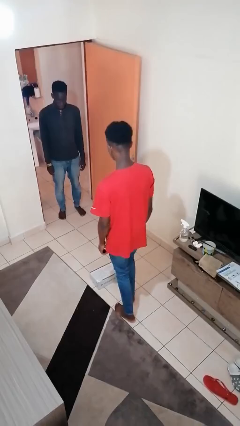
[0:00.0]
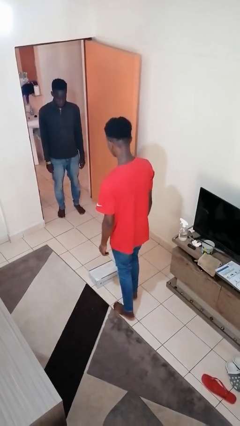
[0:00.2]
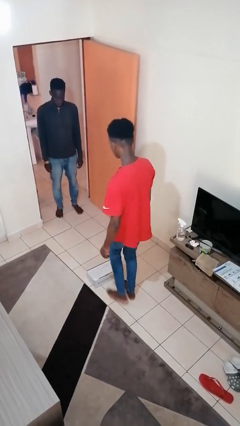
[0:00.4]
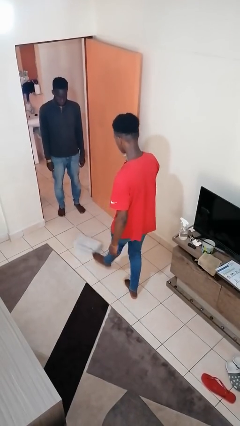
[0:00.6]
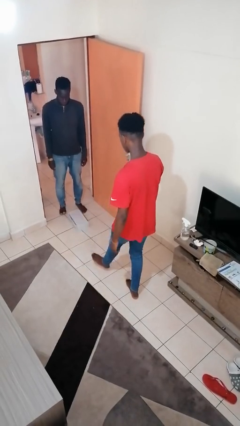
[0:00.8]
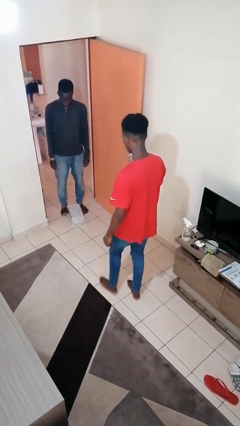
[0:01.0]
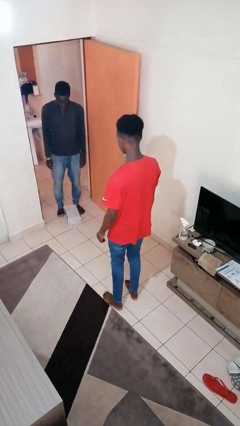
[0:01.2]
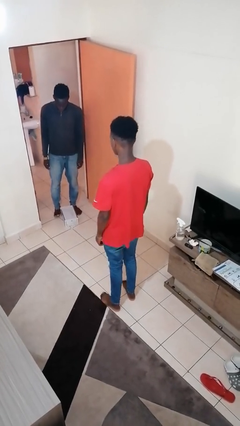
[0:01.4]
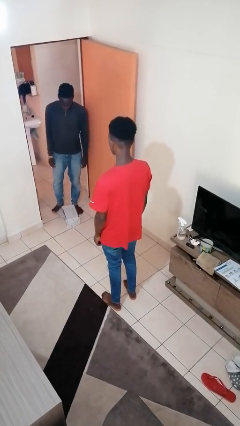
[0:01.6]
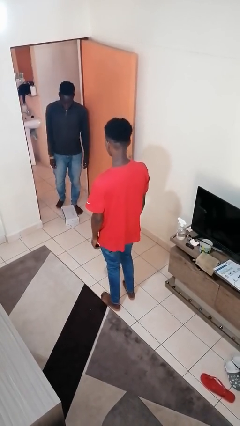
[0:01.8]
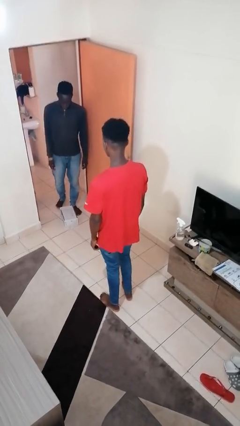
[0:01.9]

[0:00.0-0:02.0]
person kicks object to person

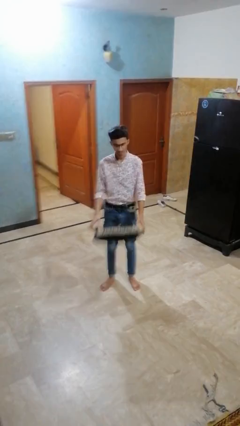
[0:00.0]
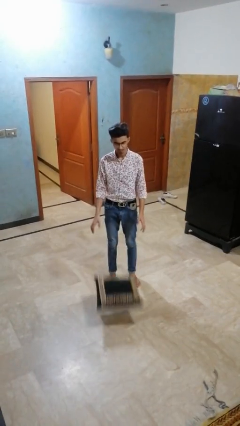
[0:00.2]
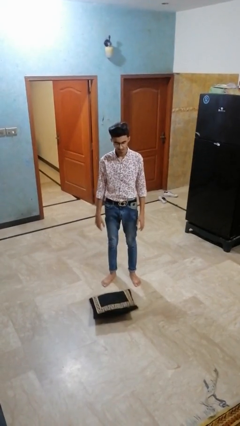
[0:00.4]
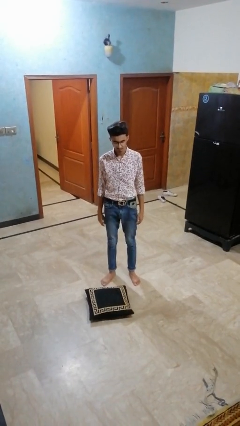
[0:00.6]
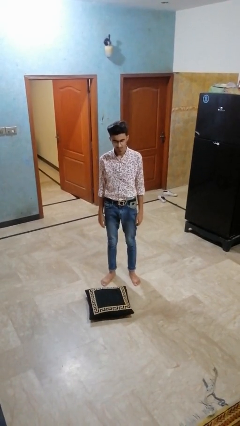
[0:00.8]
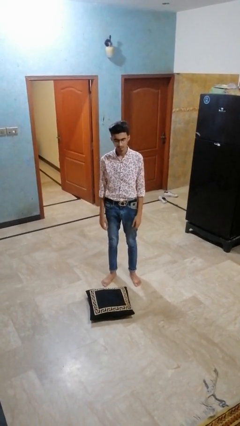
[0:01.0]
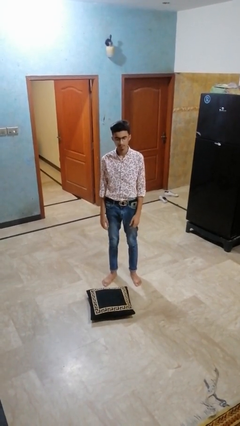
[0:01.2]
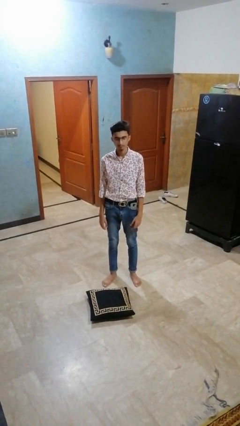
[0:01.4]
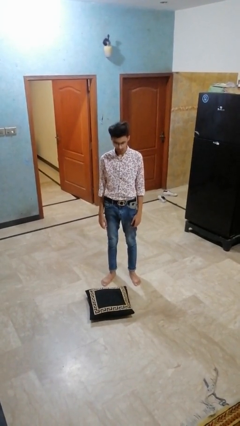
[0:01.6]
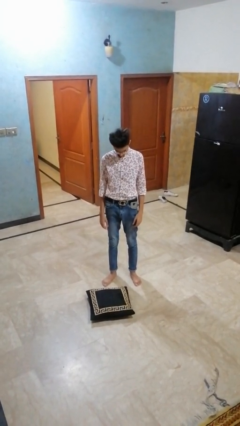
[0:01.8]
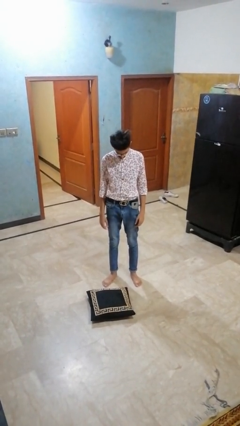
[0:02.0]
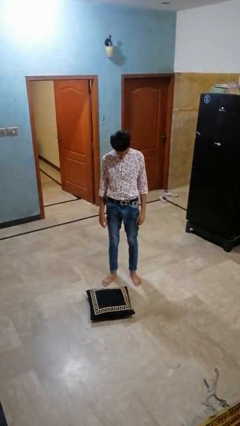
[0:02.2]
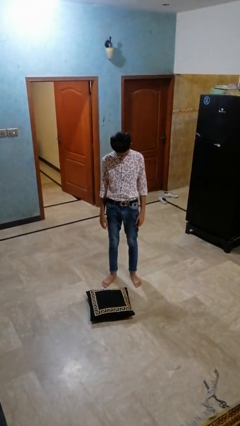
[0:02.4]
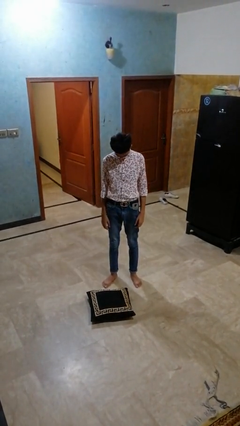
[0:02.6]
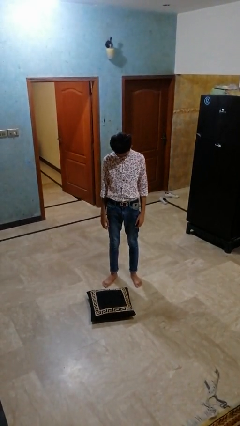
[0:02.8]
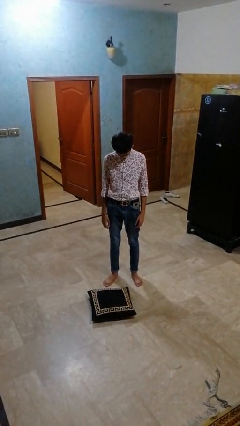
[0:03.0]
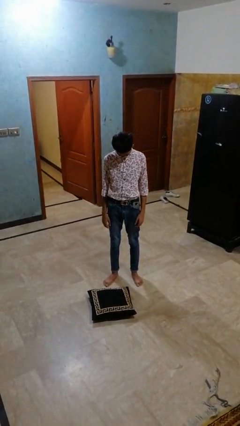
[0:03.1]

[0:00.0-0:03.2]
person throws object to ground

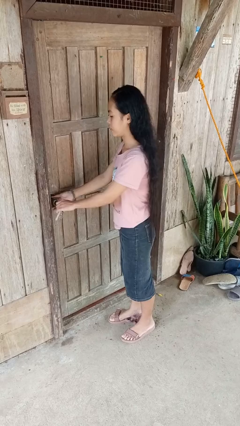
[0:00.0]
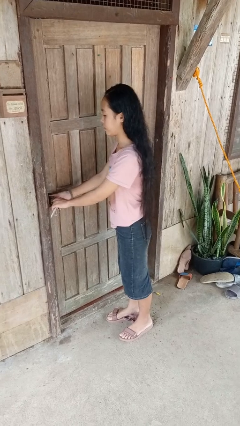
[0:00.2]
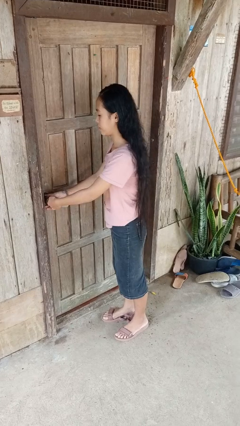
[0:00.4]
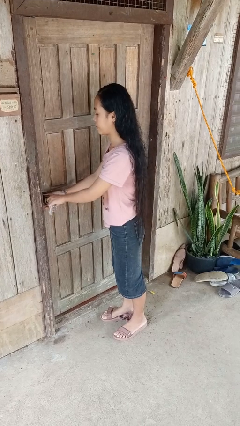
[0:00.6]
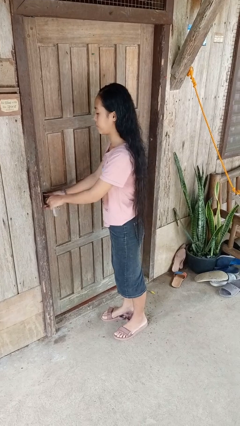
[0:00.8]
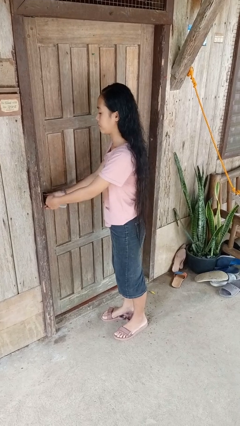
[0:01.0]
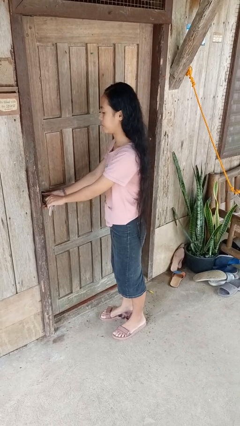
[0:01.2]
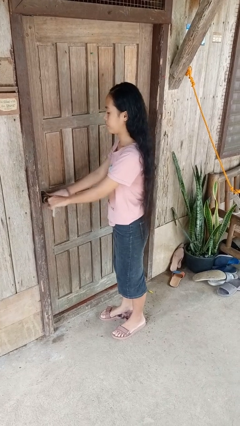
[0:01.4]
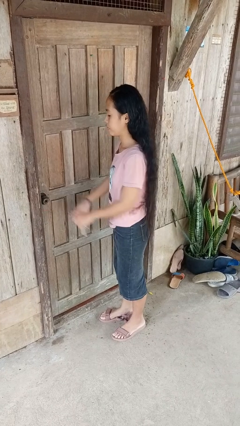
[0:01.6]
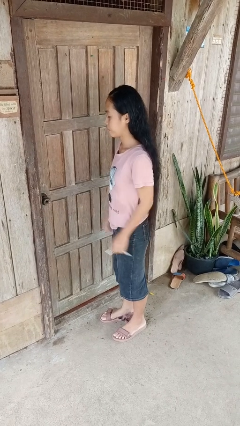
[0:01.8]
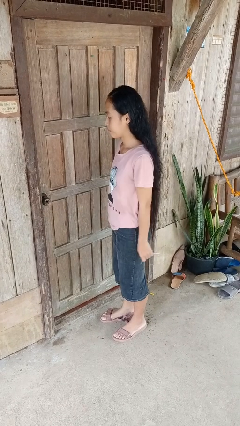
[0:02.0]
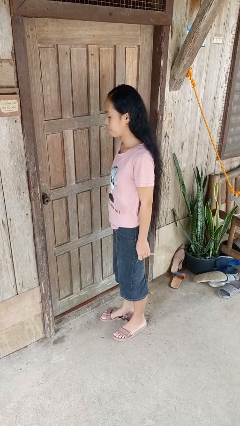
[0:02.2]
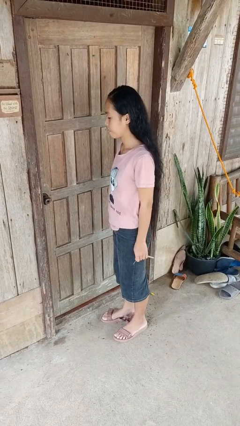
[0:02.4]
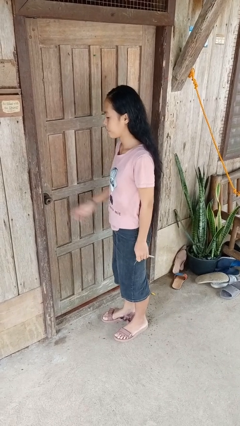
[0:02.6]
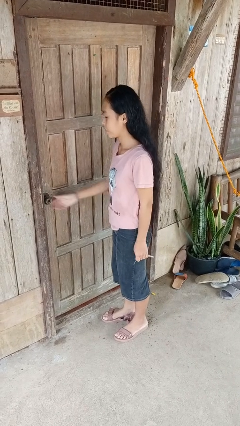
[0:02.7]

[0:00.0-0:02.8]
person unlocks door with keys

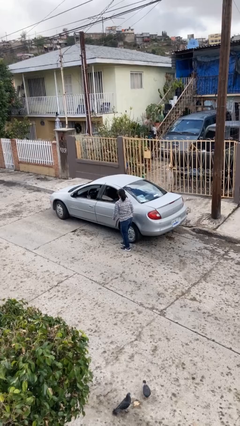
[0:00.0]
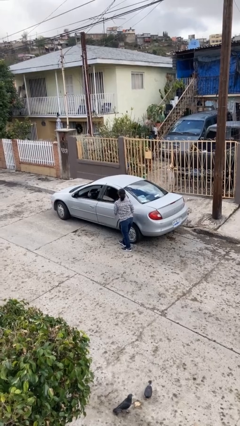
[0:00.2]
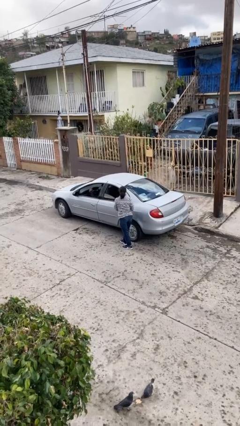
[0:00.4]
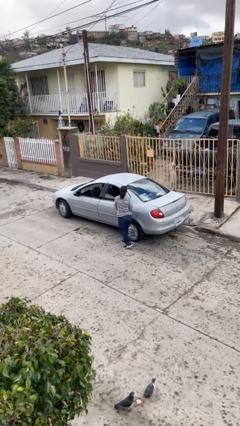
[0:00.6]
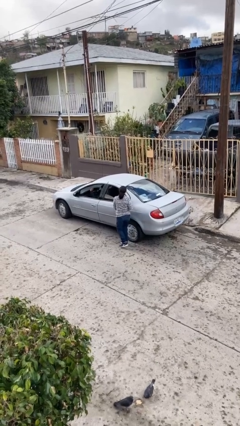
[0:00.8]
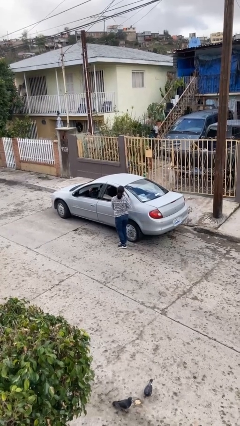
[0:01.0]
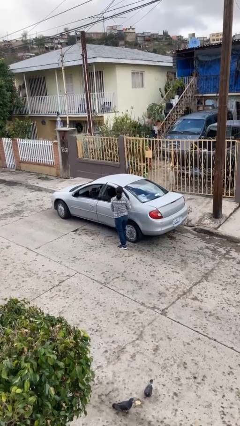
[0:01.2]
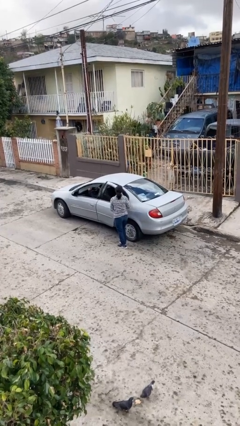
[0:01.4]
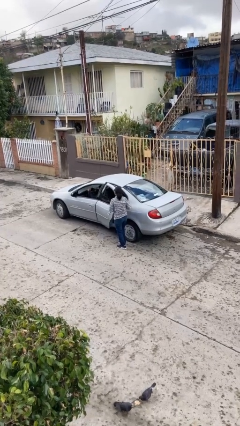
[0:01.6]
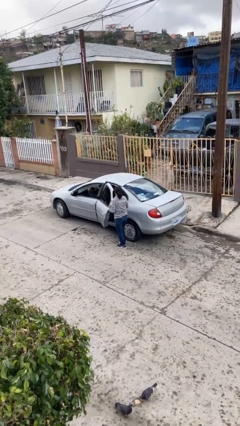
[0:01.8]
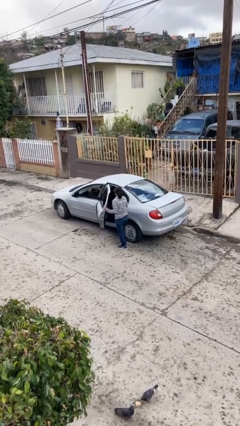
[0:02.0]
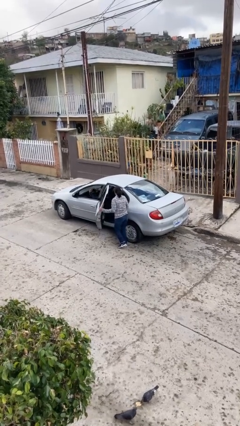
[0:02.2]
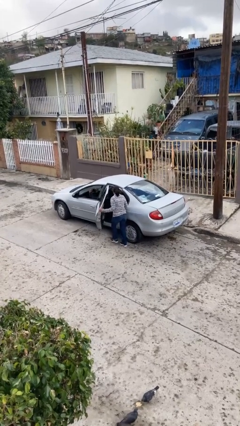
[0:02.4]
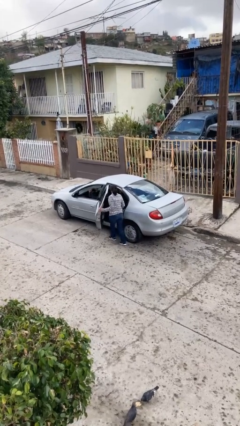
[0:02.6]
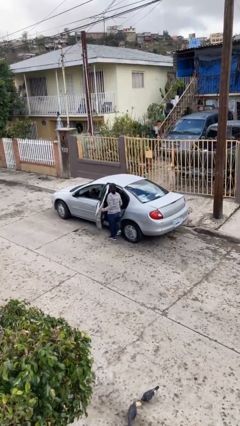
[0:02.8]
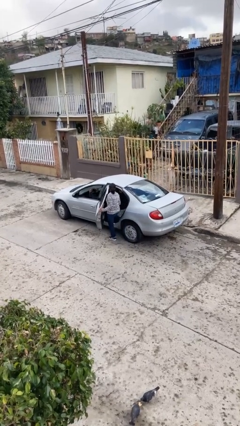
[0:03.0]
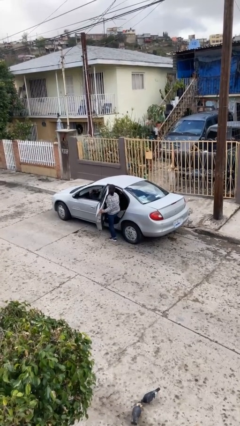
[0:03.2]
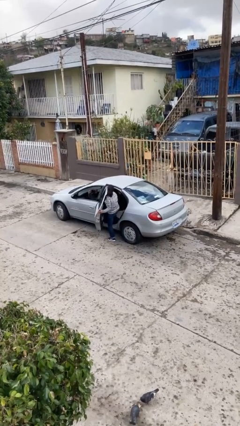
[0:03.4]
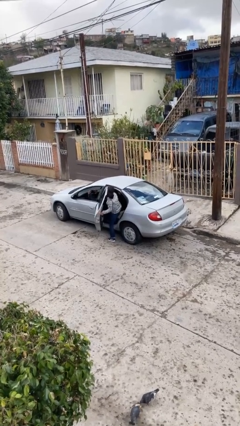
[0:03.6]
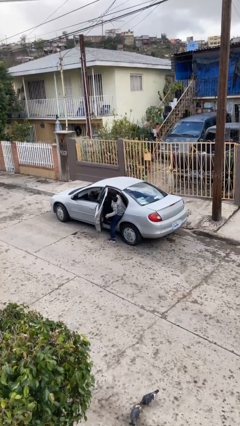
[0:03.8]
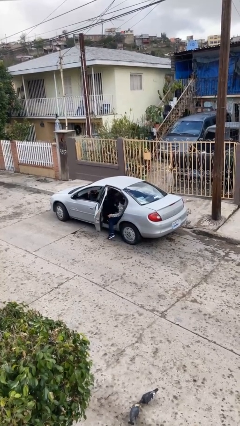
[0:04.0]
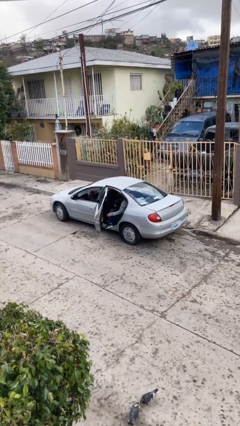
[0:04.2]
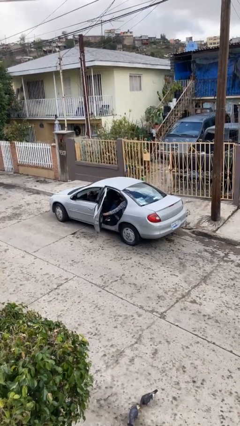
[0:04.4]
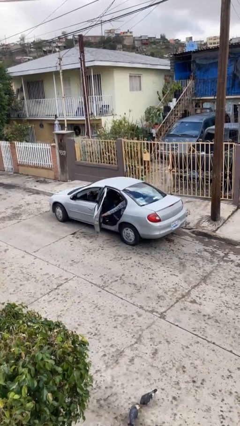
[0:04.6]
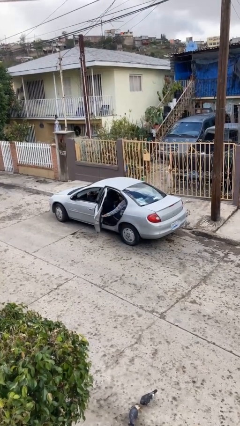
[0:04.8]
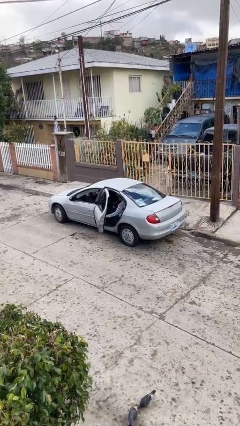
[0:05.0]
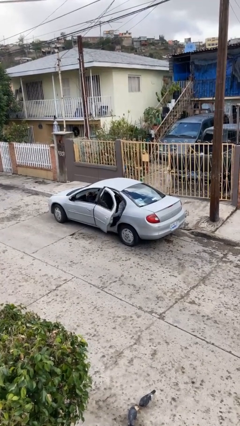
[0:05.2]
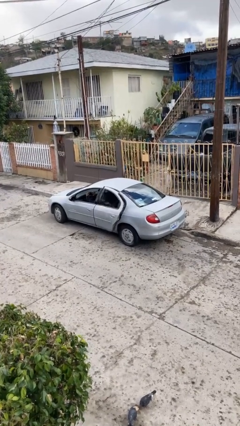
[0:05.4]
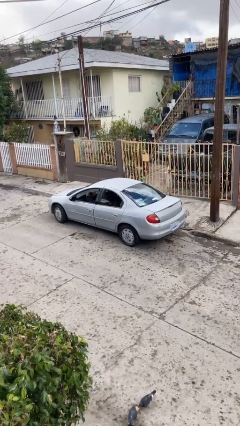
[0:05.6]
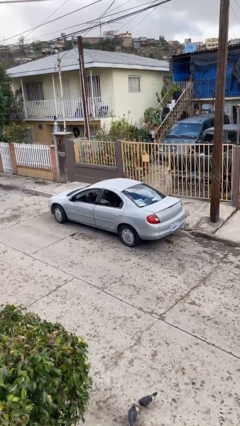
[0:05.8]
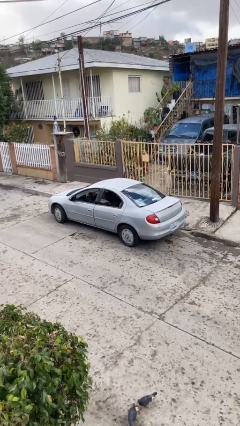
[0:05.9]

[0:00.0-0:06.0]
car picks up person

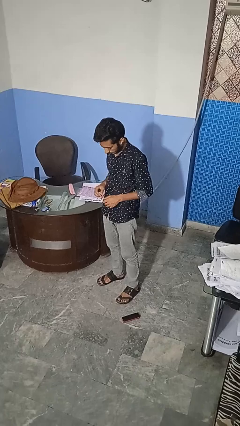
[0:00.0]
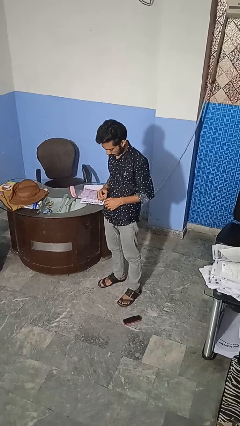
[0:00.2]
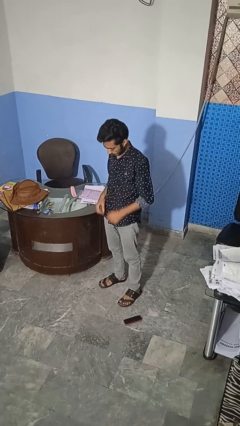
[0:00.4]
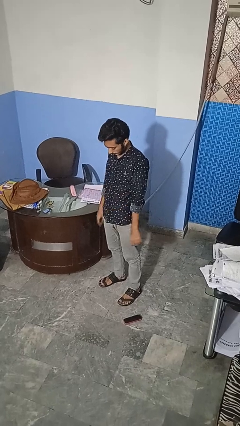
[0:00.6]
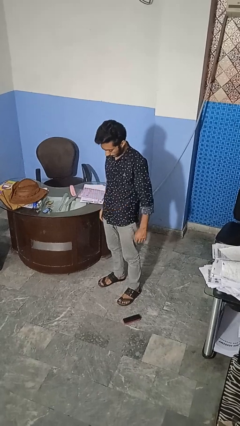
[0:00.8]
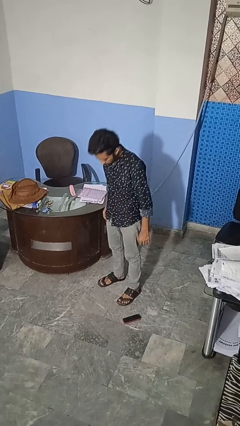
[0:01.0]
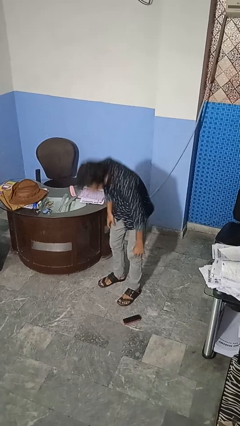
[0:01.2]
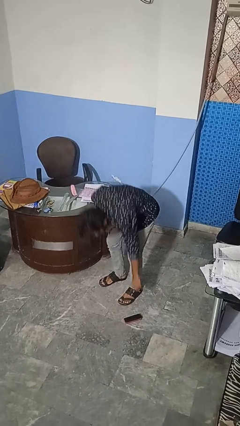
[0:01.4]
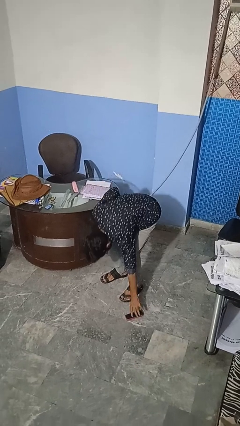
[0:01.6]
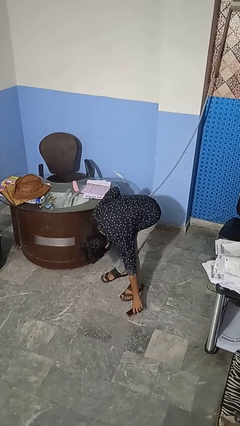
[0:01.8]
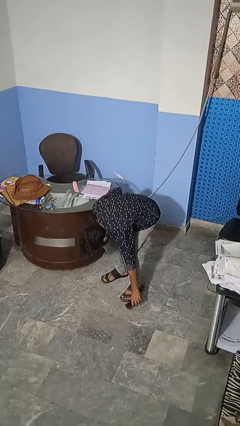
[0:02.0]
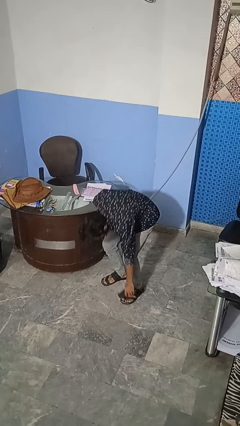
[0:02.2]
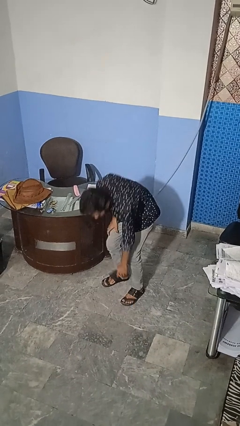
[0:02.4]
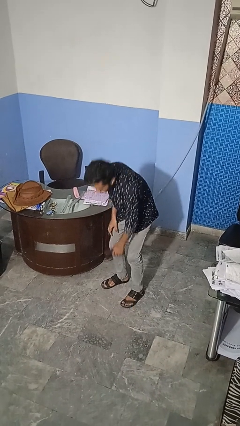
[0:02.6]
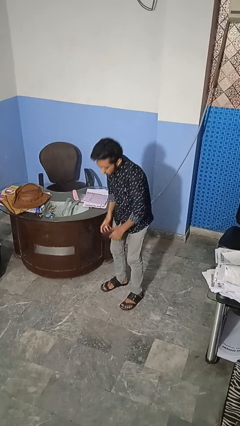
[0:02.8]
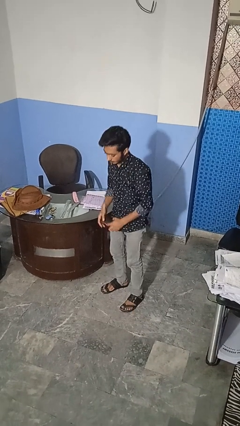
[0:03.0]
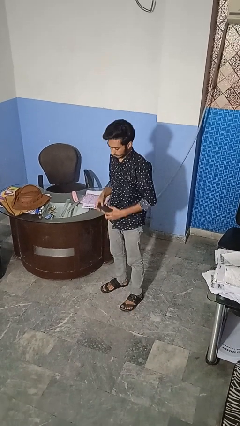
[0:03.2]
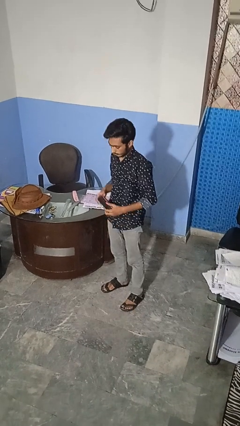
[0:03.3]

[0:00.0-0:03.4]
person picks up object from floor
